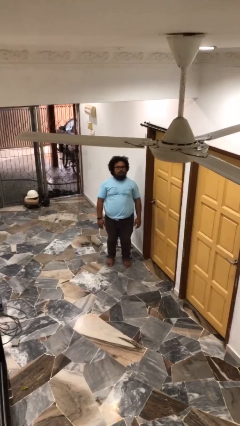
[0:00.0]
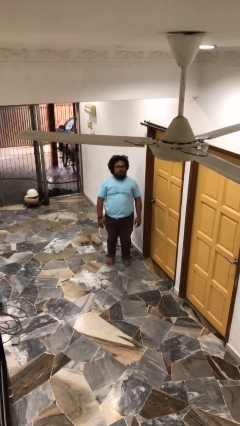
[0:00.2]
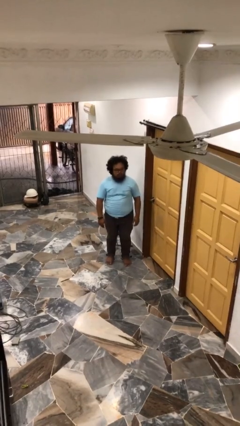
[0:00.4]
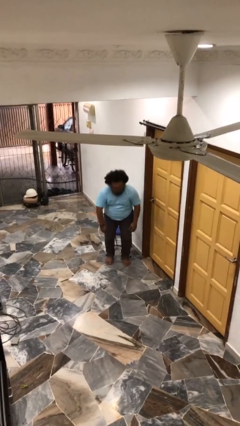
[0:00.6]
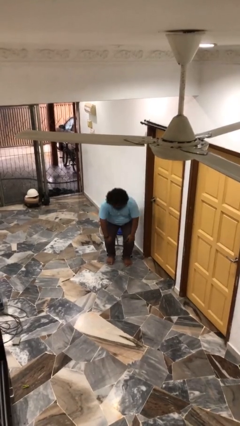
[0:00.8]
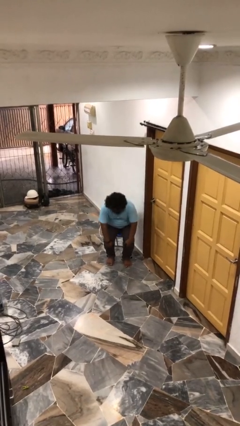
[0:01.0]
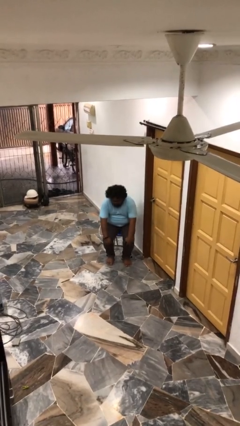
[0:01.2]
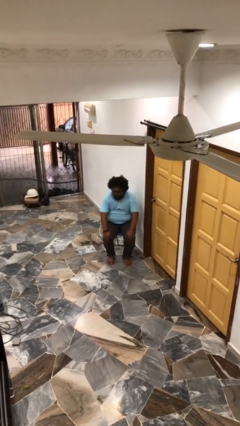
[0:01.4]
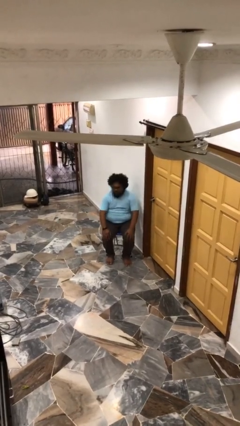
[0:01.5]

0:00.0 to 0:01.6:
person sits down

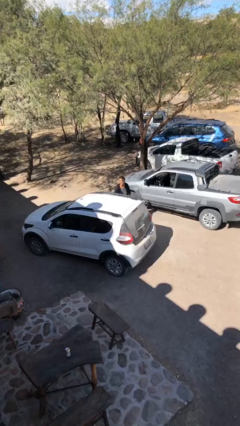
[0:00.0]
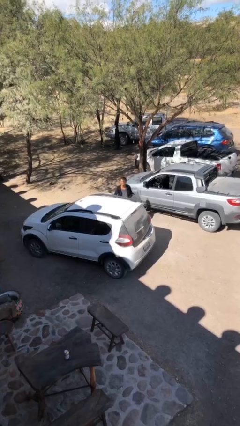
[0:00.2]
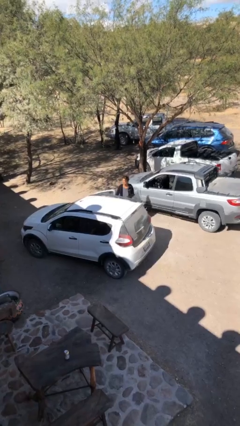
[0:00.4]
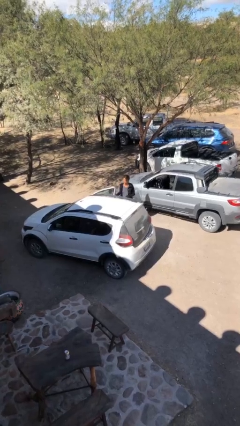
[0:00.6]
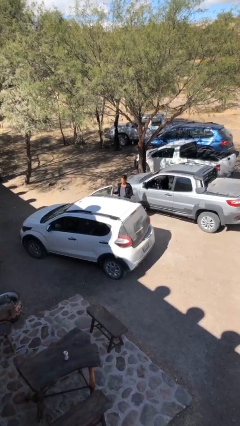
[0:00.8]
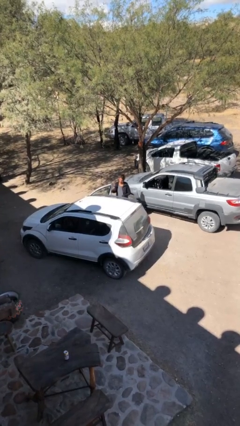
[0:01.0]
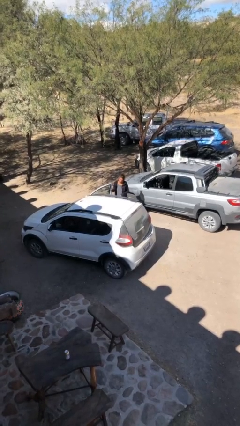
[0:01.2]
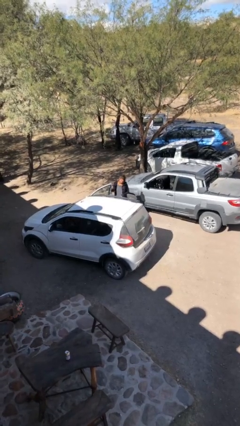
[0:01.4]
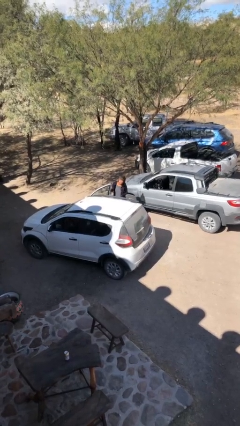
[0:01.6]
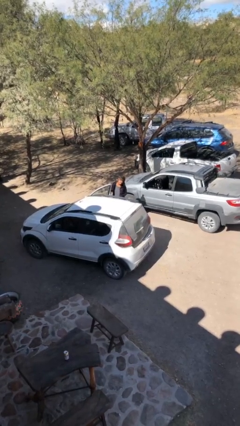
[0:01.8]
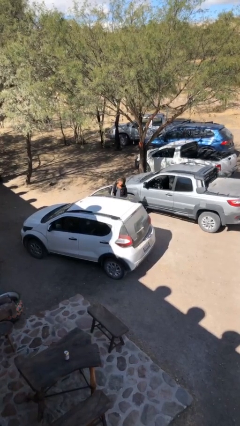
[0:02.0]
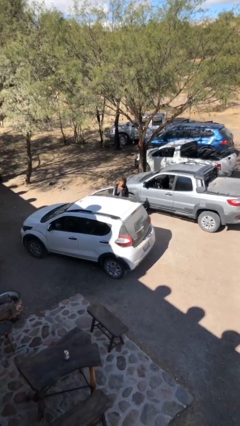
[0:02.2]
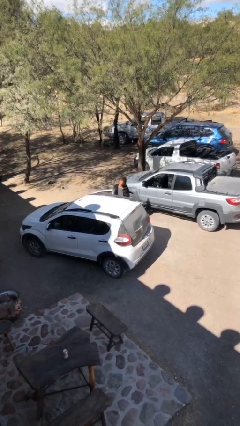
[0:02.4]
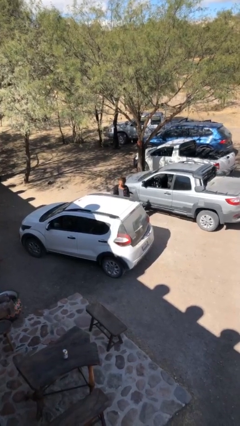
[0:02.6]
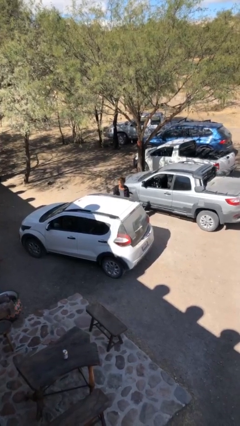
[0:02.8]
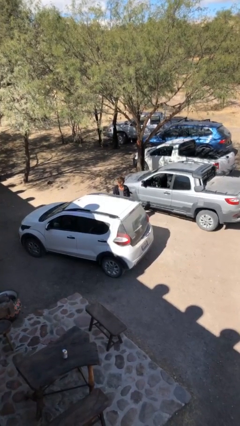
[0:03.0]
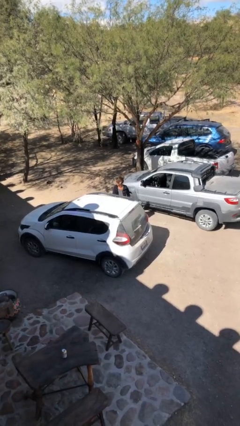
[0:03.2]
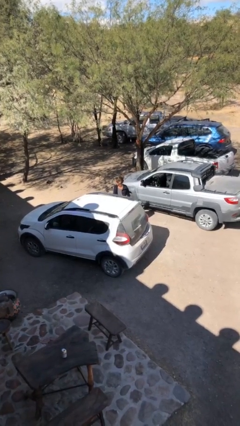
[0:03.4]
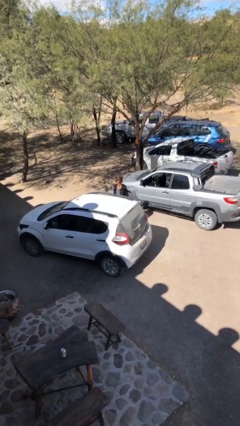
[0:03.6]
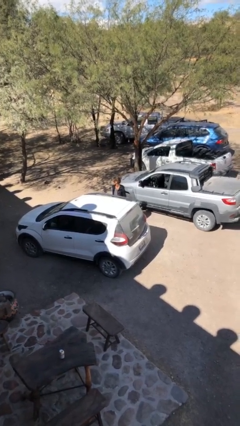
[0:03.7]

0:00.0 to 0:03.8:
person closes car door

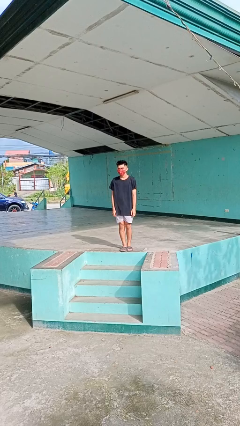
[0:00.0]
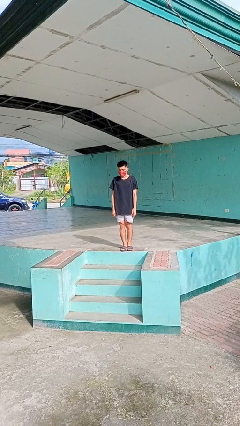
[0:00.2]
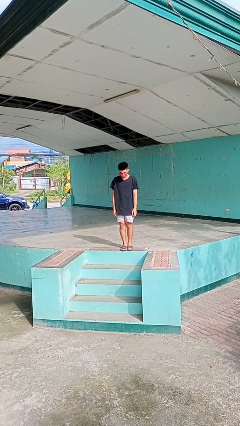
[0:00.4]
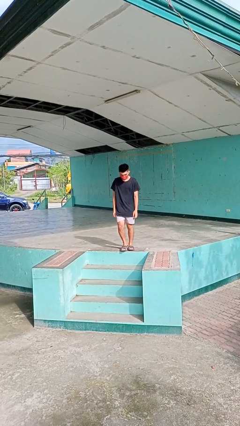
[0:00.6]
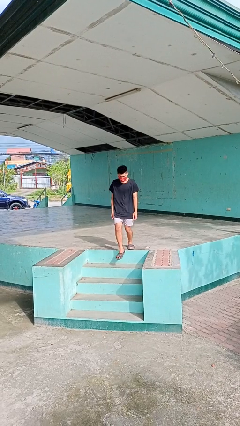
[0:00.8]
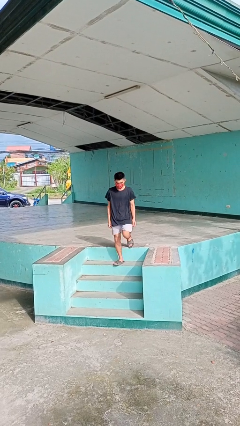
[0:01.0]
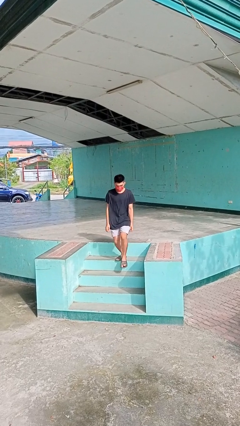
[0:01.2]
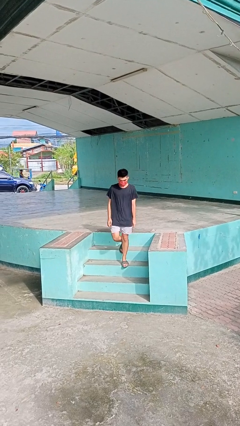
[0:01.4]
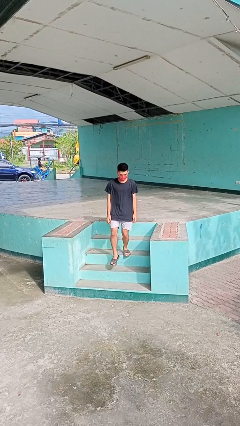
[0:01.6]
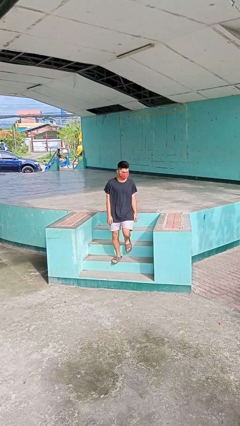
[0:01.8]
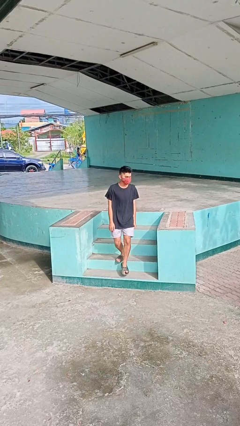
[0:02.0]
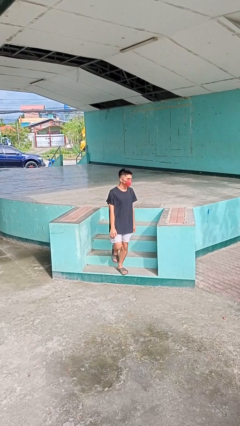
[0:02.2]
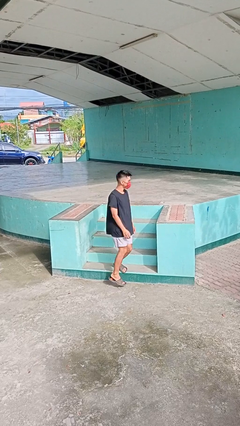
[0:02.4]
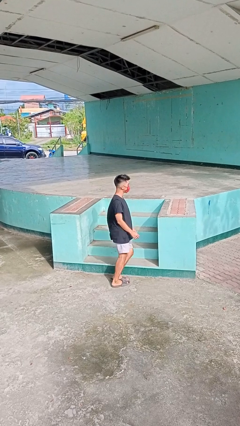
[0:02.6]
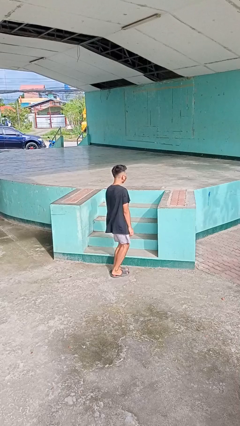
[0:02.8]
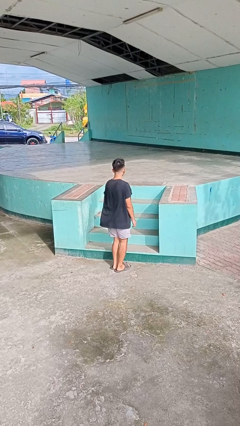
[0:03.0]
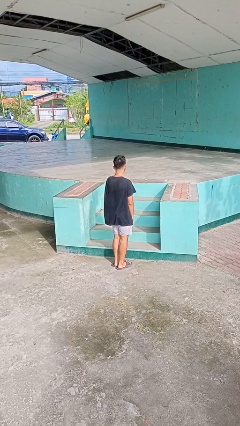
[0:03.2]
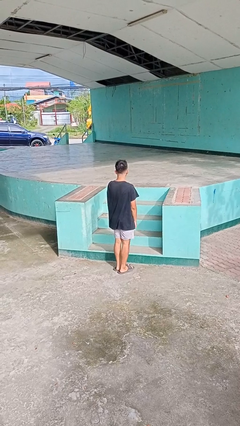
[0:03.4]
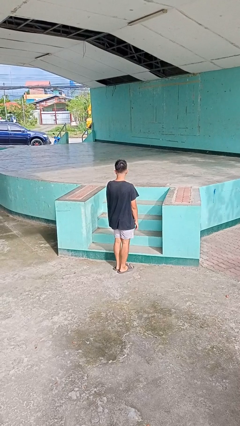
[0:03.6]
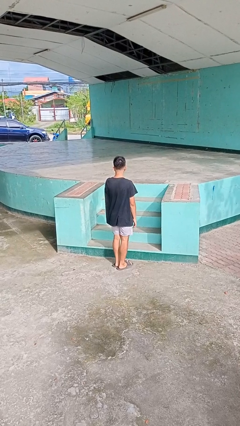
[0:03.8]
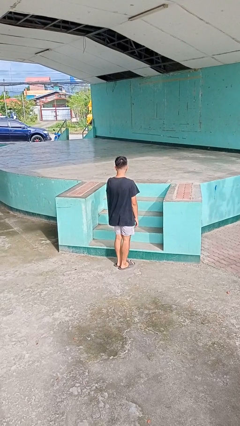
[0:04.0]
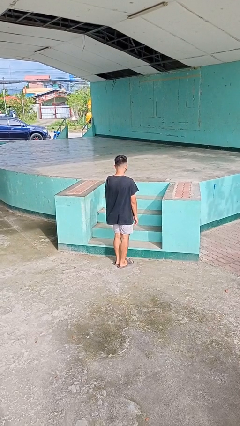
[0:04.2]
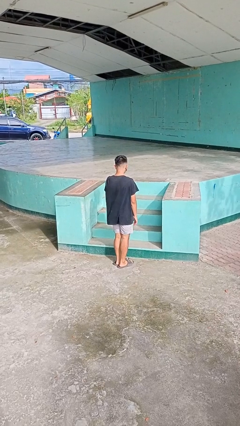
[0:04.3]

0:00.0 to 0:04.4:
person climbs down stairs

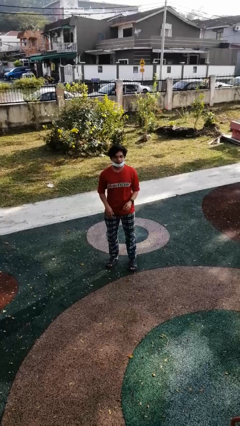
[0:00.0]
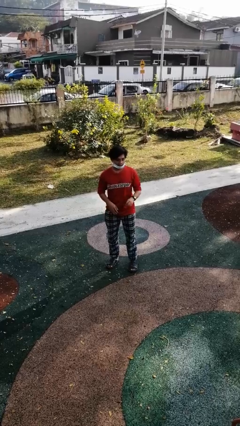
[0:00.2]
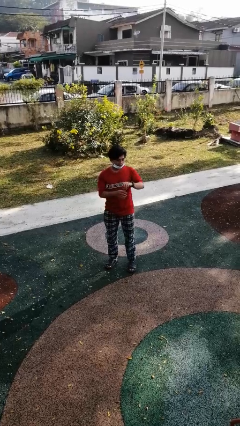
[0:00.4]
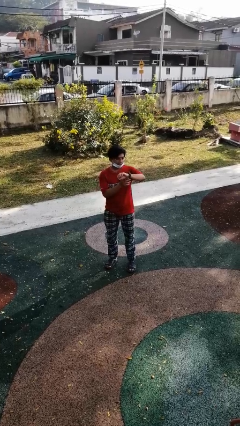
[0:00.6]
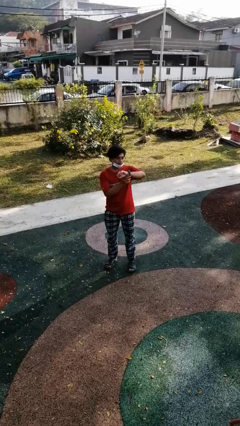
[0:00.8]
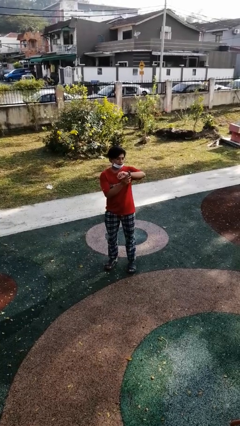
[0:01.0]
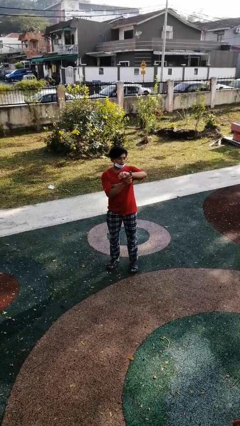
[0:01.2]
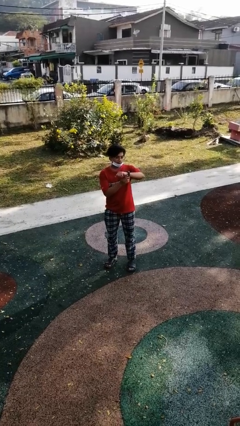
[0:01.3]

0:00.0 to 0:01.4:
person looks at wristwatch

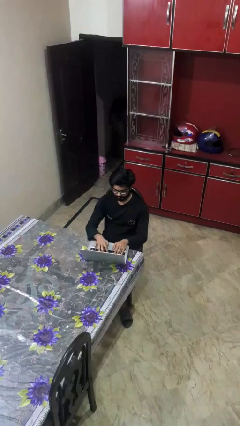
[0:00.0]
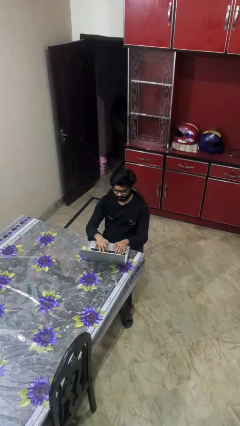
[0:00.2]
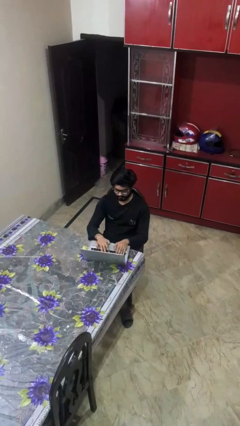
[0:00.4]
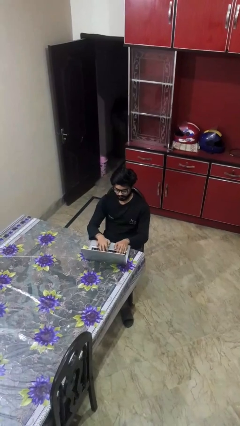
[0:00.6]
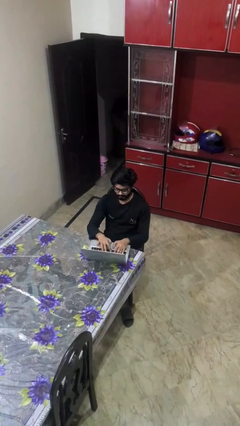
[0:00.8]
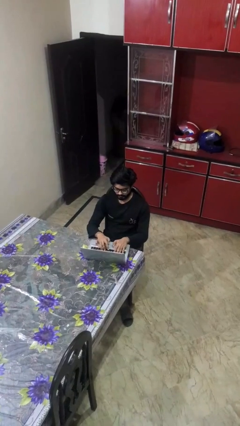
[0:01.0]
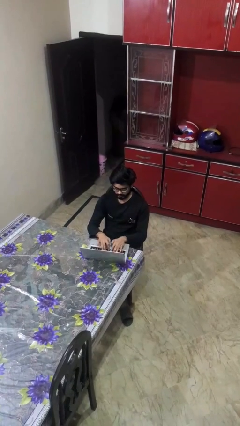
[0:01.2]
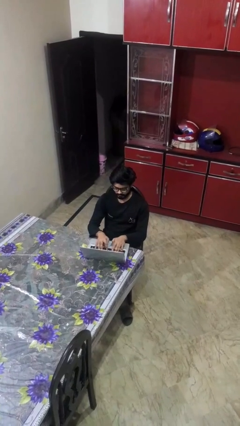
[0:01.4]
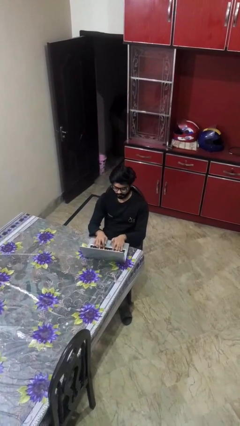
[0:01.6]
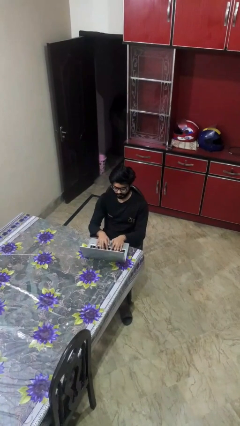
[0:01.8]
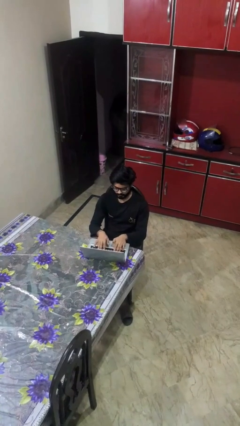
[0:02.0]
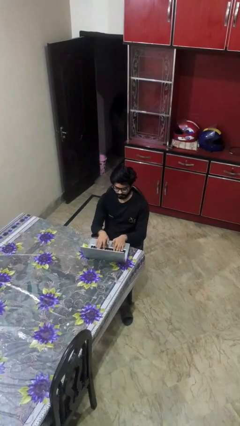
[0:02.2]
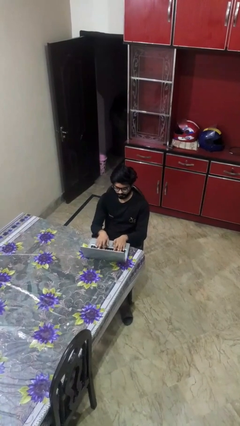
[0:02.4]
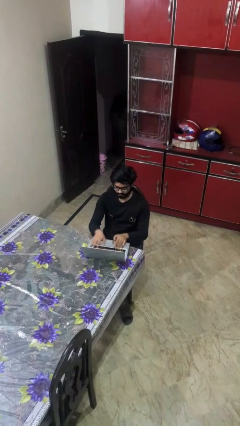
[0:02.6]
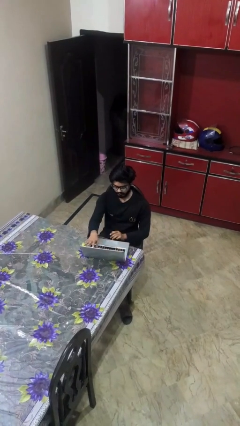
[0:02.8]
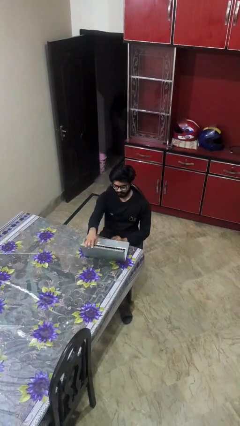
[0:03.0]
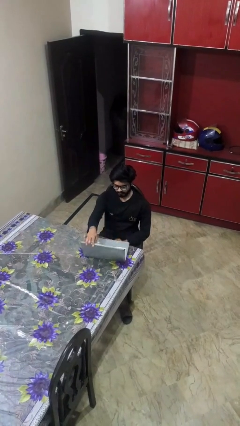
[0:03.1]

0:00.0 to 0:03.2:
person interacts with laptop

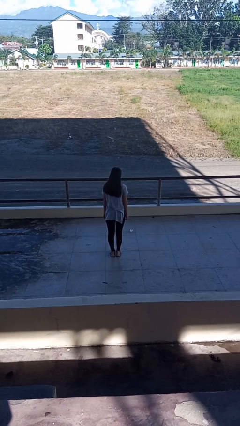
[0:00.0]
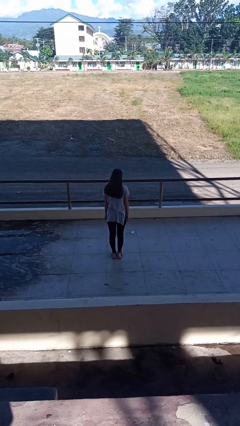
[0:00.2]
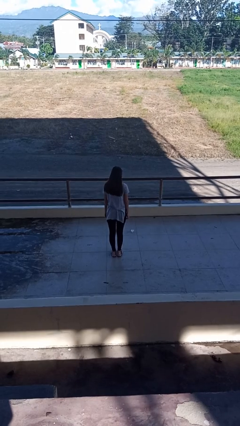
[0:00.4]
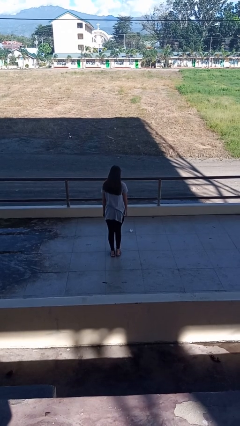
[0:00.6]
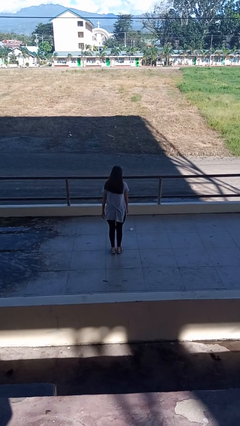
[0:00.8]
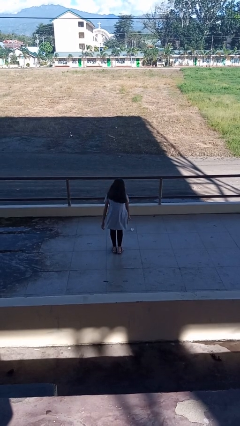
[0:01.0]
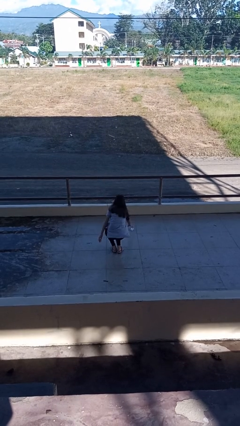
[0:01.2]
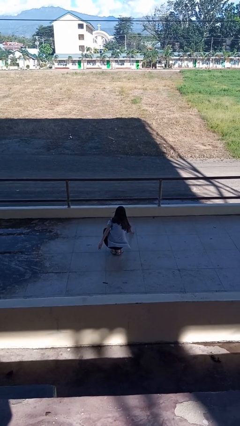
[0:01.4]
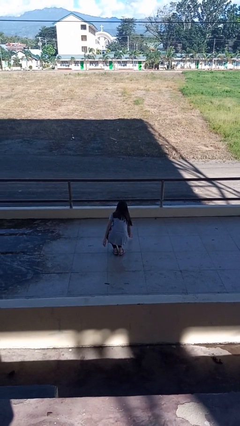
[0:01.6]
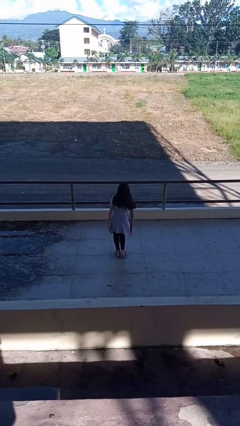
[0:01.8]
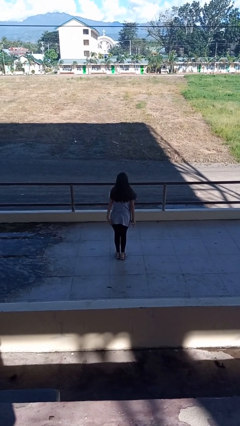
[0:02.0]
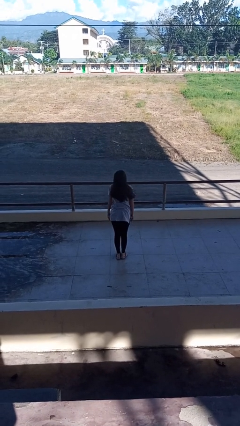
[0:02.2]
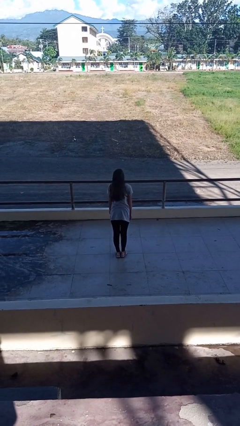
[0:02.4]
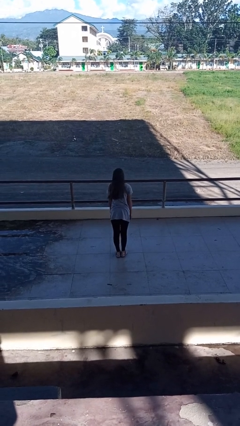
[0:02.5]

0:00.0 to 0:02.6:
person picks up object from floor

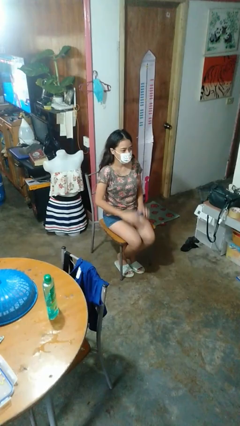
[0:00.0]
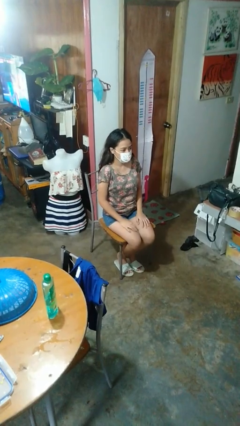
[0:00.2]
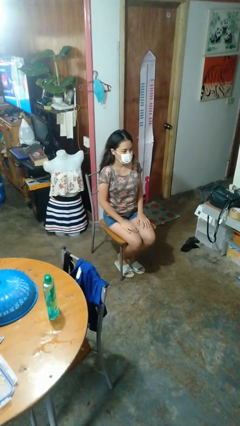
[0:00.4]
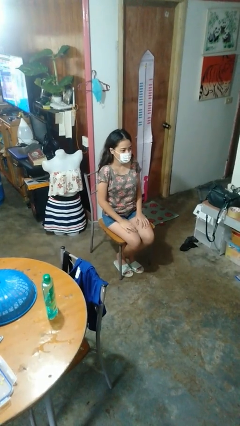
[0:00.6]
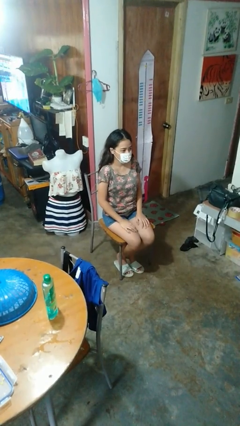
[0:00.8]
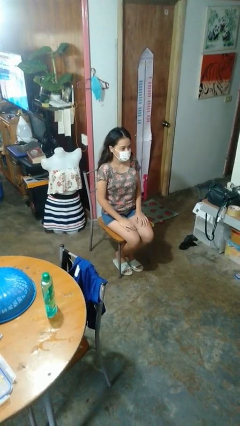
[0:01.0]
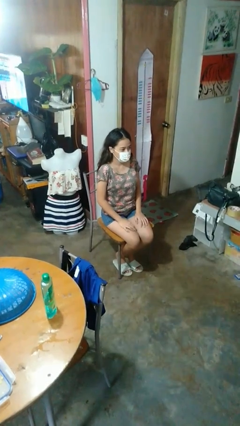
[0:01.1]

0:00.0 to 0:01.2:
person closes mailbox
